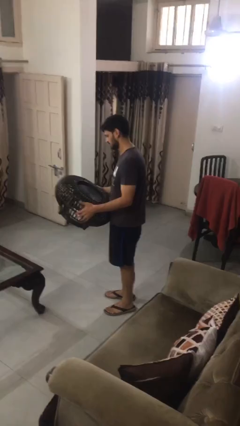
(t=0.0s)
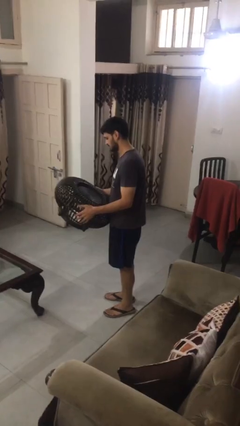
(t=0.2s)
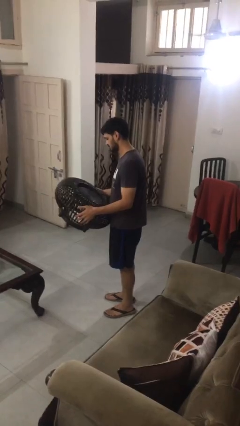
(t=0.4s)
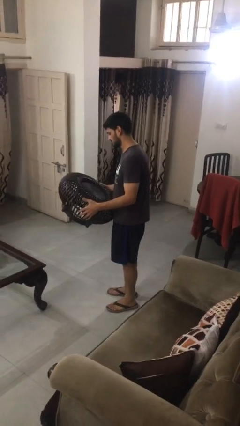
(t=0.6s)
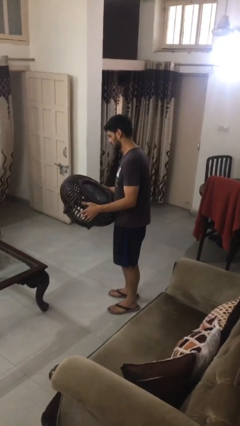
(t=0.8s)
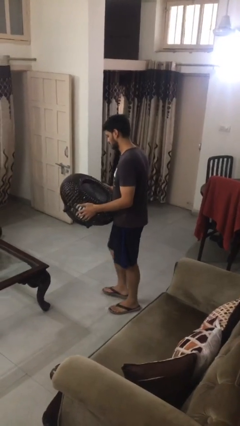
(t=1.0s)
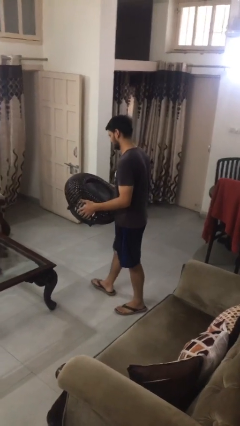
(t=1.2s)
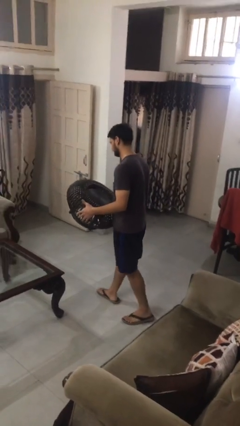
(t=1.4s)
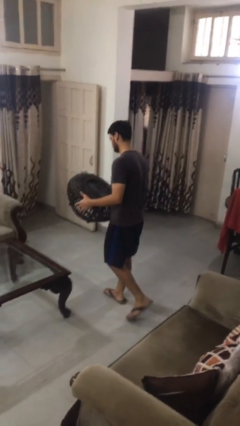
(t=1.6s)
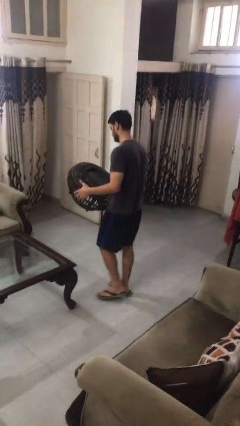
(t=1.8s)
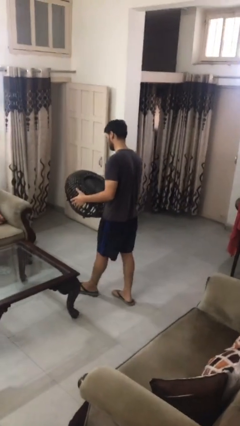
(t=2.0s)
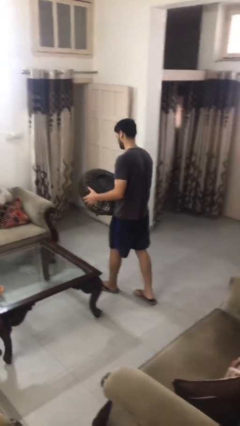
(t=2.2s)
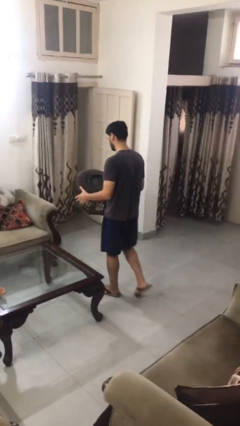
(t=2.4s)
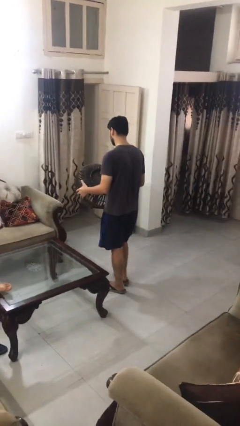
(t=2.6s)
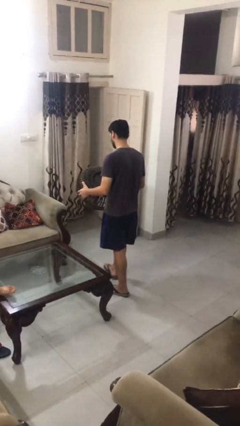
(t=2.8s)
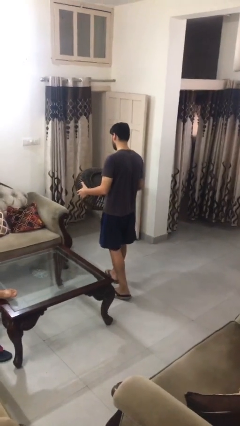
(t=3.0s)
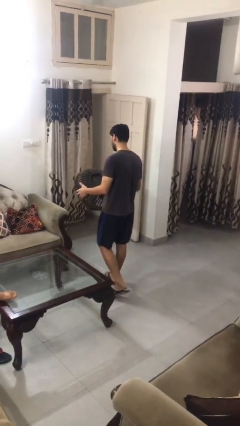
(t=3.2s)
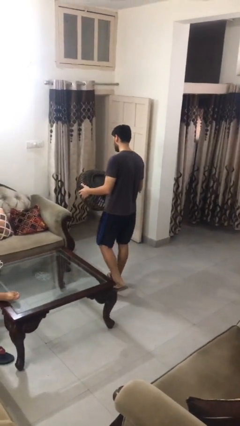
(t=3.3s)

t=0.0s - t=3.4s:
person carries furniture

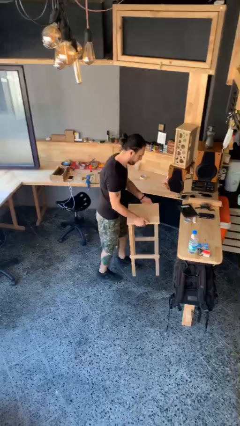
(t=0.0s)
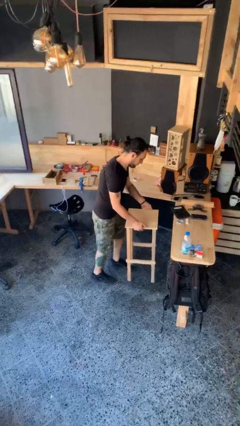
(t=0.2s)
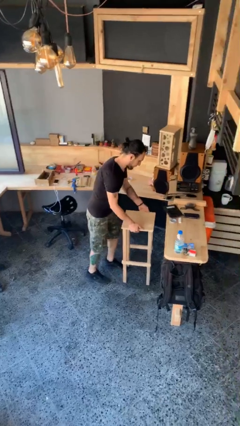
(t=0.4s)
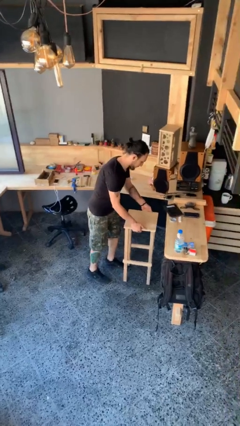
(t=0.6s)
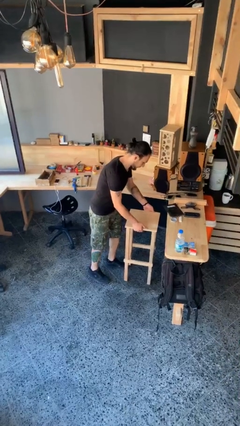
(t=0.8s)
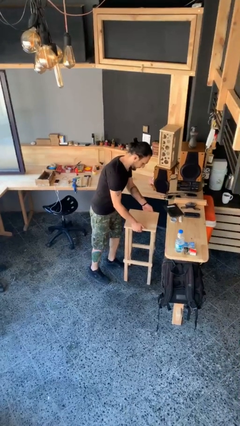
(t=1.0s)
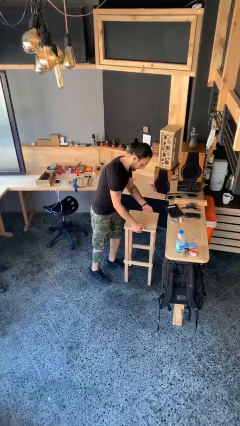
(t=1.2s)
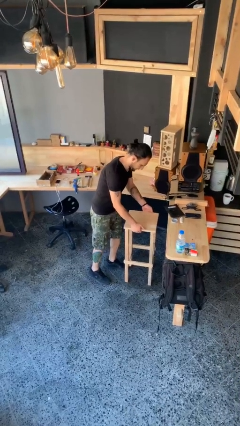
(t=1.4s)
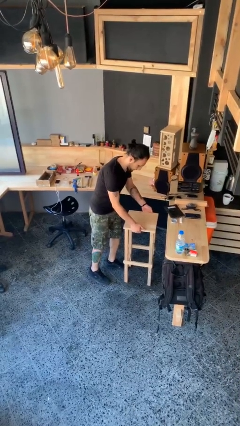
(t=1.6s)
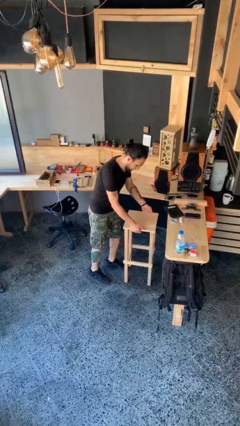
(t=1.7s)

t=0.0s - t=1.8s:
person puts down object on floor

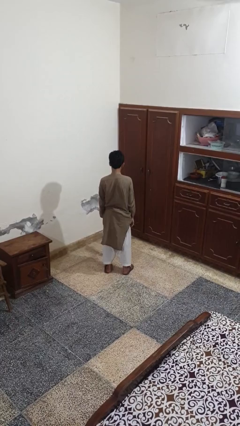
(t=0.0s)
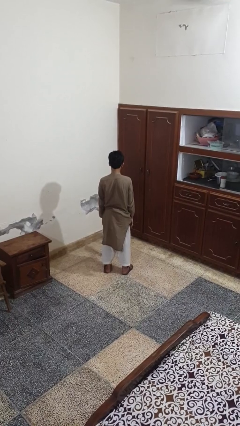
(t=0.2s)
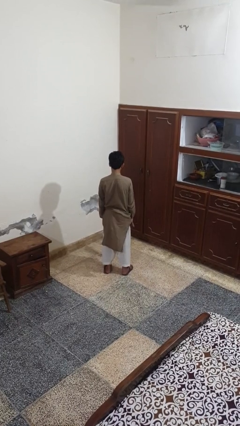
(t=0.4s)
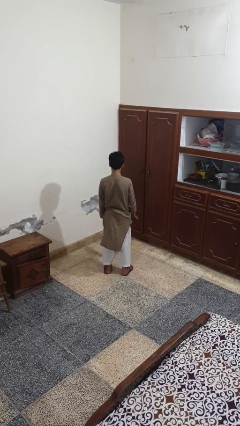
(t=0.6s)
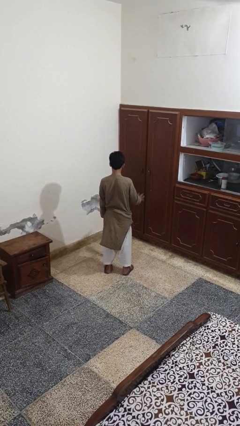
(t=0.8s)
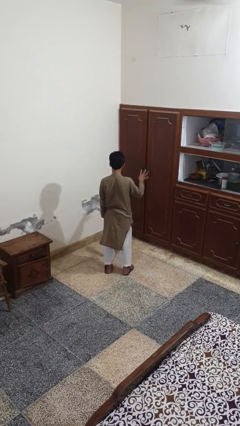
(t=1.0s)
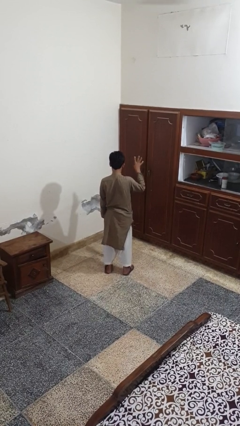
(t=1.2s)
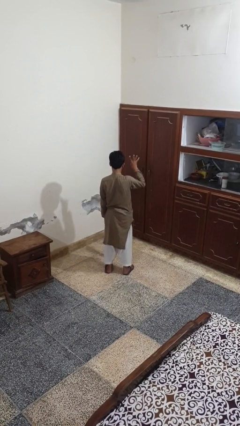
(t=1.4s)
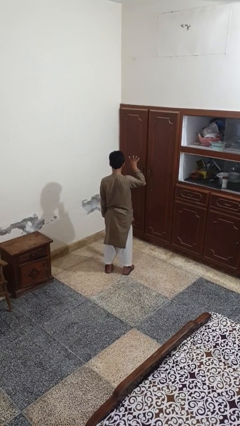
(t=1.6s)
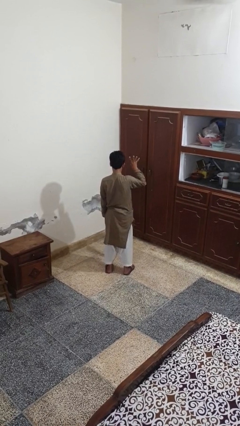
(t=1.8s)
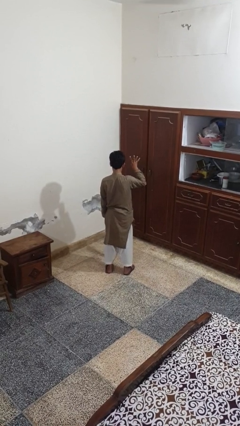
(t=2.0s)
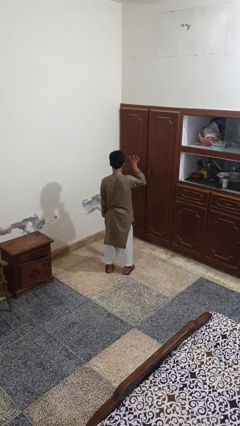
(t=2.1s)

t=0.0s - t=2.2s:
person gestures number four

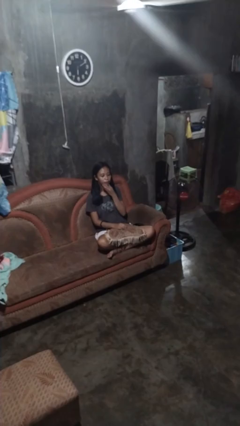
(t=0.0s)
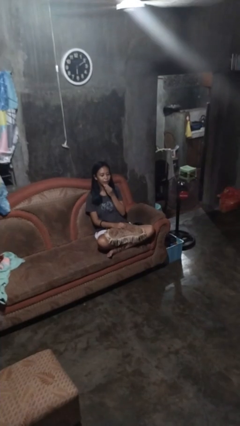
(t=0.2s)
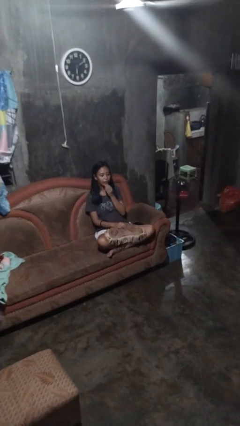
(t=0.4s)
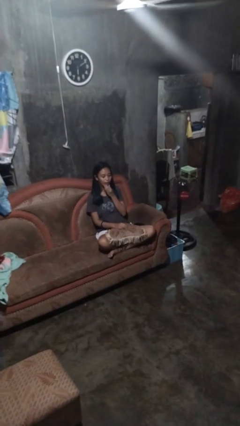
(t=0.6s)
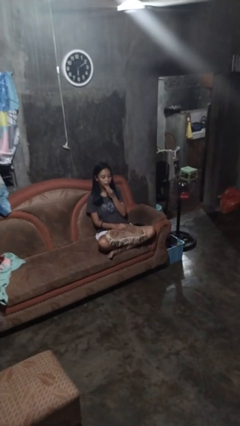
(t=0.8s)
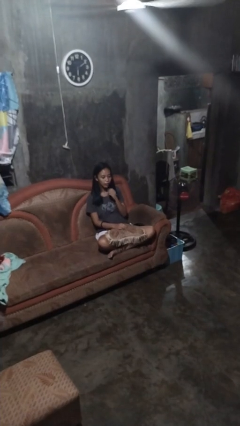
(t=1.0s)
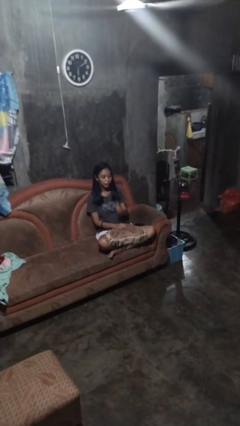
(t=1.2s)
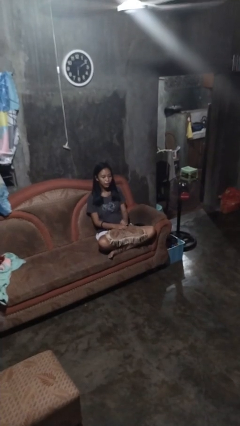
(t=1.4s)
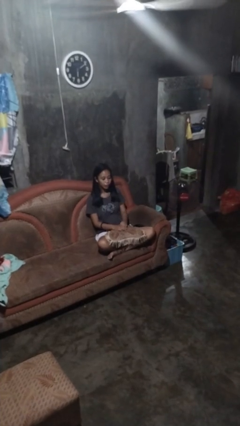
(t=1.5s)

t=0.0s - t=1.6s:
person strokes chin

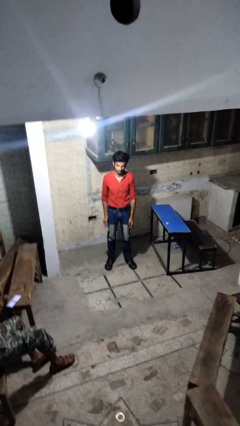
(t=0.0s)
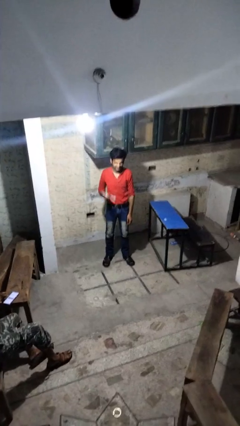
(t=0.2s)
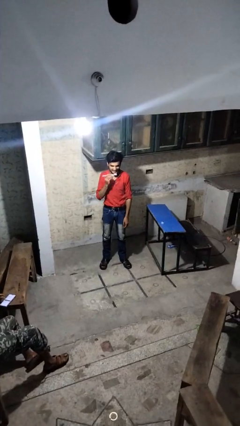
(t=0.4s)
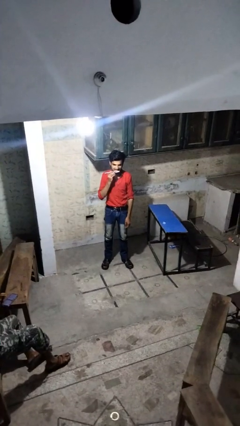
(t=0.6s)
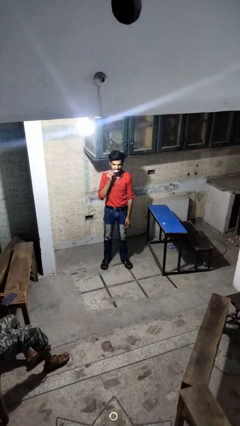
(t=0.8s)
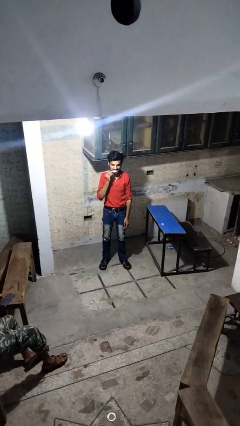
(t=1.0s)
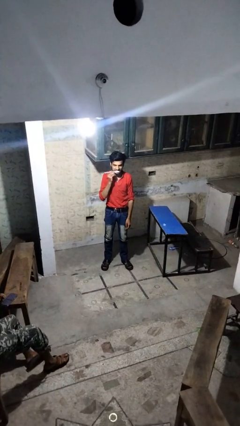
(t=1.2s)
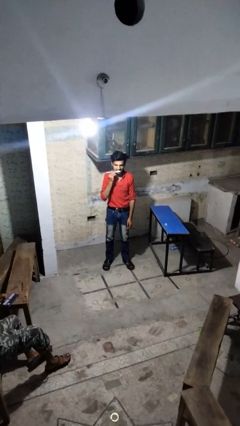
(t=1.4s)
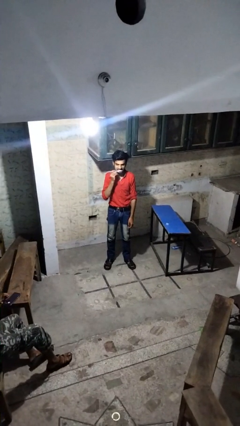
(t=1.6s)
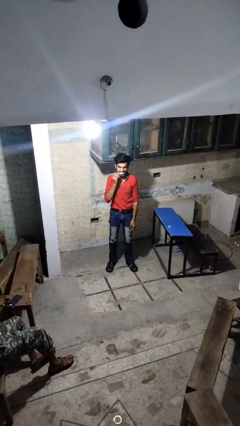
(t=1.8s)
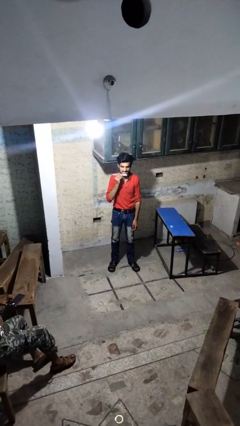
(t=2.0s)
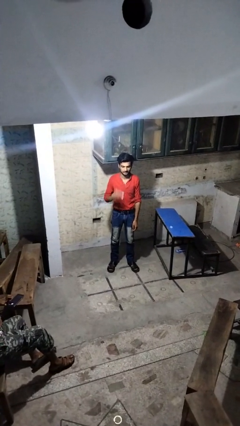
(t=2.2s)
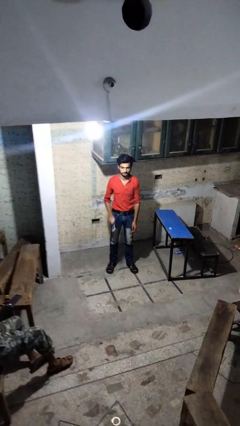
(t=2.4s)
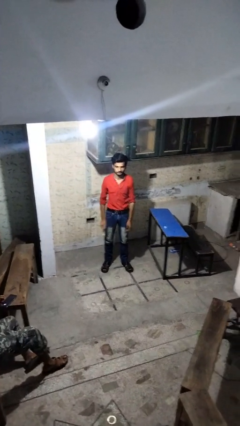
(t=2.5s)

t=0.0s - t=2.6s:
person brushes teeth

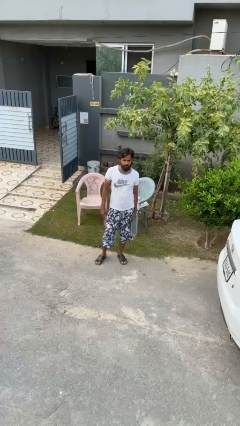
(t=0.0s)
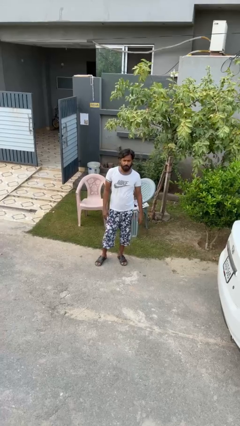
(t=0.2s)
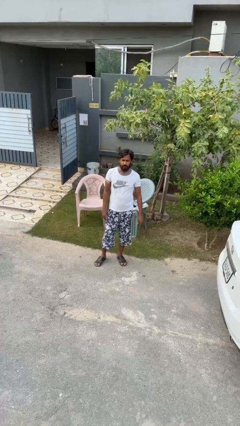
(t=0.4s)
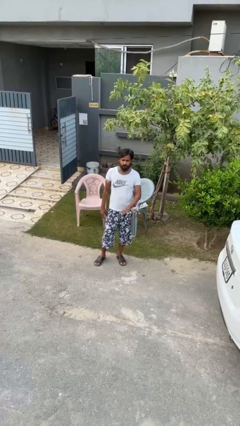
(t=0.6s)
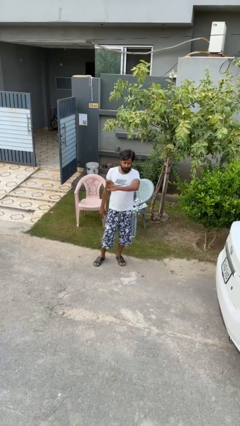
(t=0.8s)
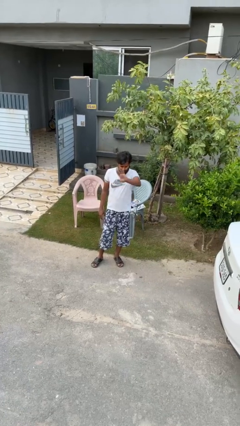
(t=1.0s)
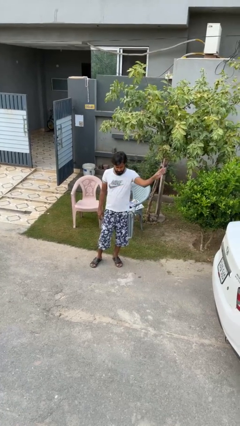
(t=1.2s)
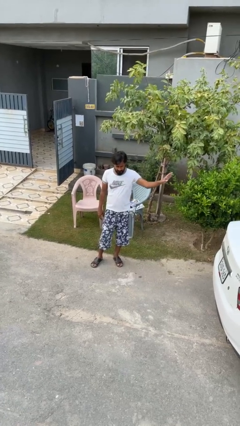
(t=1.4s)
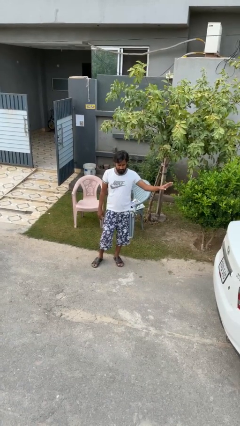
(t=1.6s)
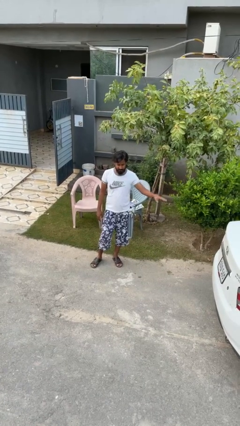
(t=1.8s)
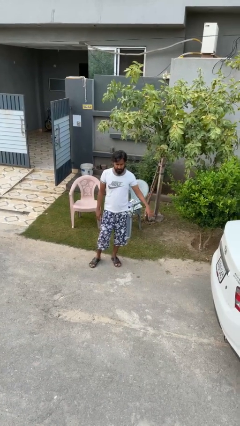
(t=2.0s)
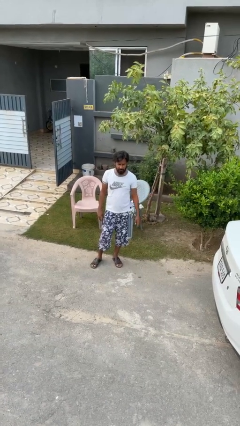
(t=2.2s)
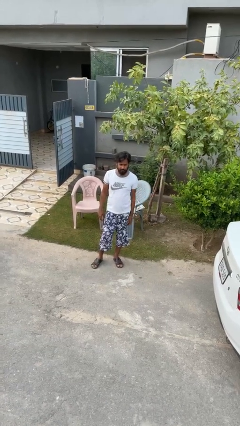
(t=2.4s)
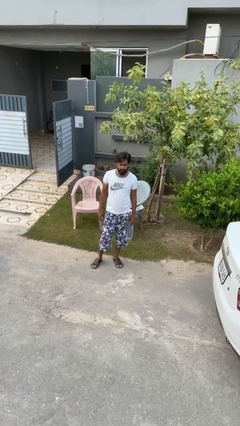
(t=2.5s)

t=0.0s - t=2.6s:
person gestures swipe left

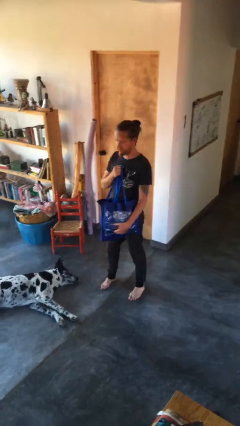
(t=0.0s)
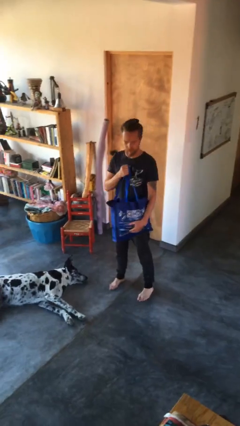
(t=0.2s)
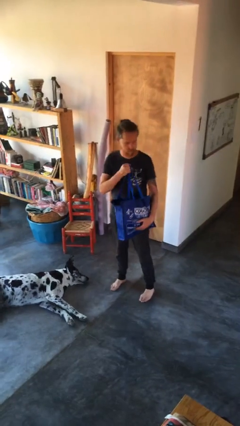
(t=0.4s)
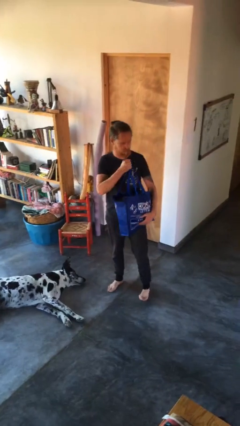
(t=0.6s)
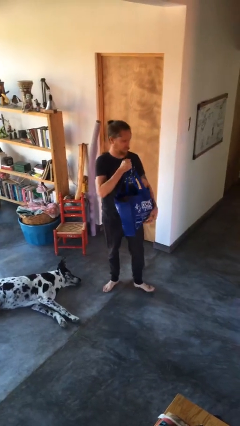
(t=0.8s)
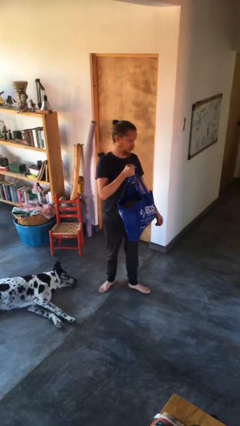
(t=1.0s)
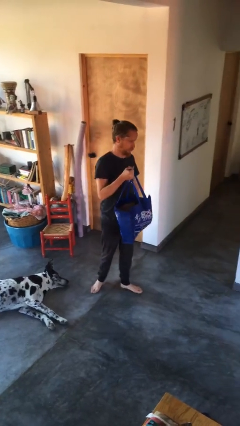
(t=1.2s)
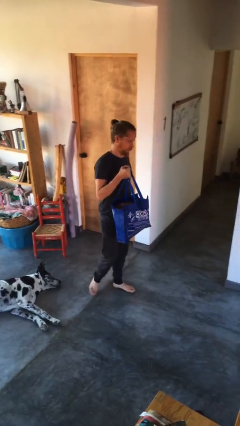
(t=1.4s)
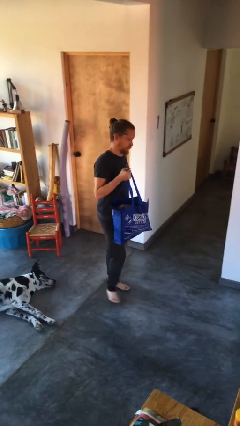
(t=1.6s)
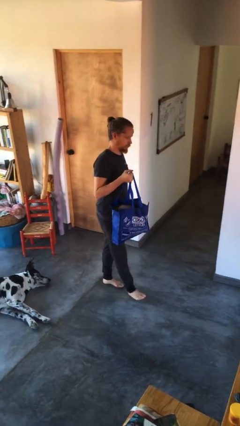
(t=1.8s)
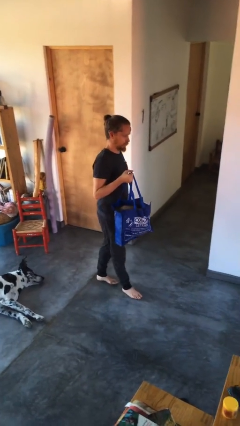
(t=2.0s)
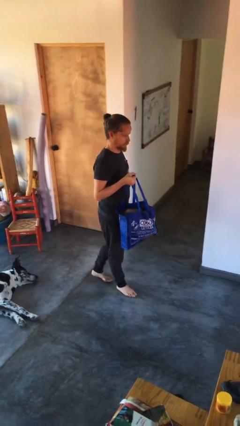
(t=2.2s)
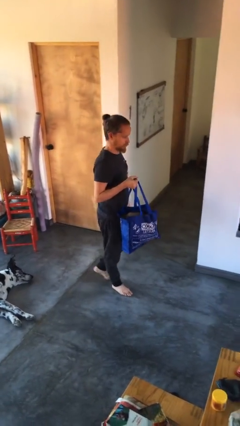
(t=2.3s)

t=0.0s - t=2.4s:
person carries groceries
